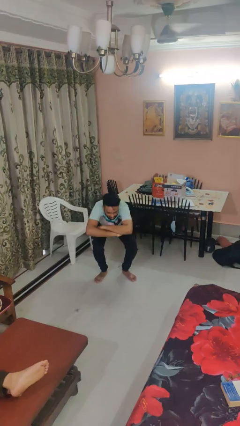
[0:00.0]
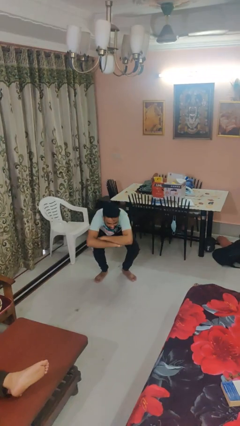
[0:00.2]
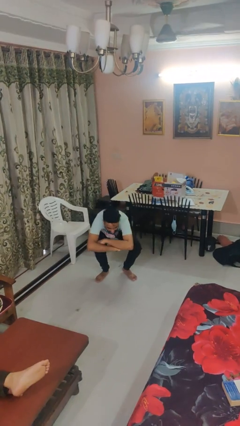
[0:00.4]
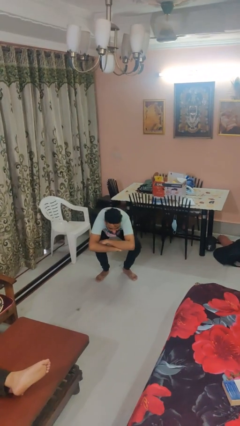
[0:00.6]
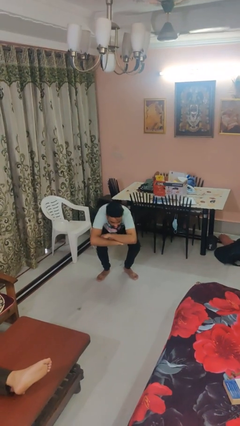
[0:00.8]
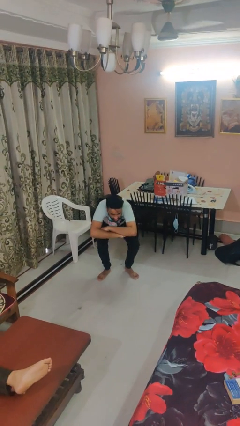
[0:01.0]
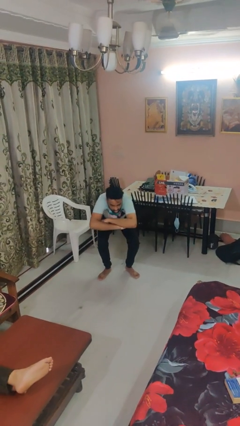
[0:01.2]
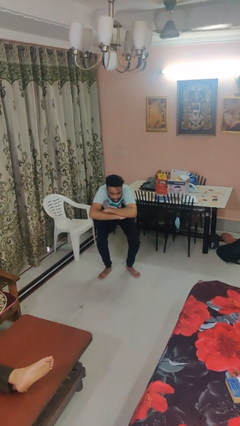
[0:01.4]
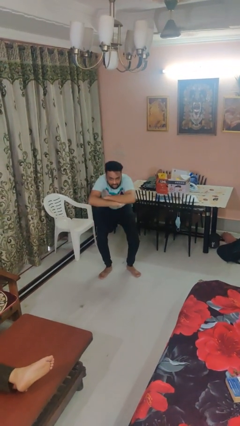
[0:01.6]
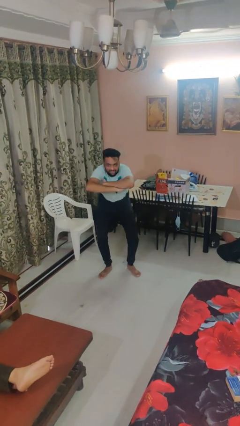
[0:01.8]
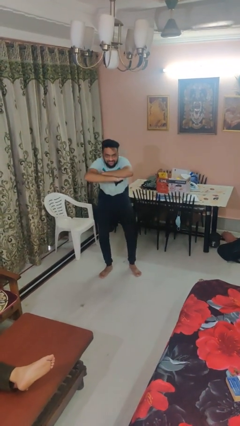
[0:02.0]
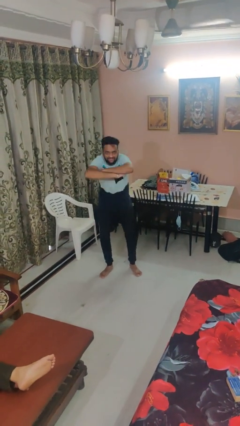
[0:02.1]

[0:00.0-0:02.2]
person squats

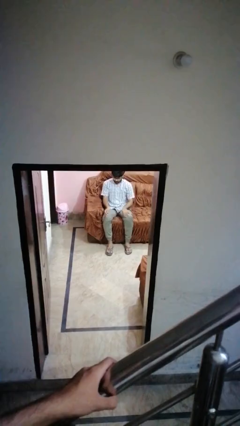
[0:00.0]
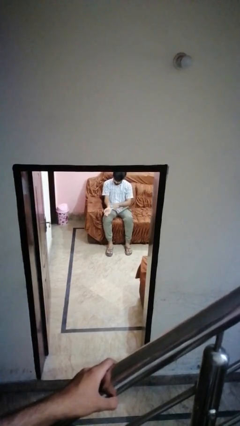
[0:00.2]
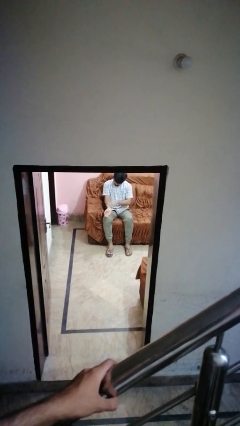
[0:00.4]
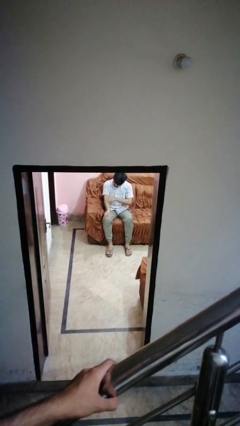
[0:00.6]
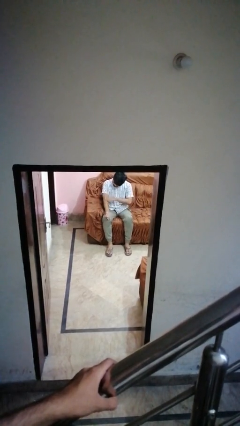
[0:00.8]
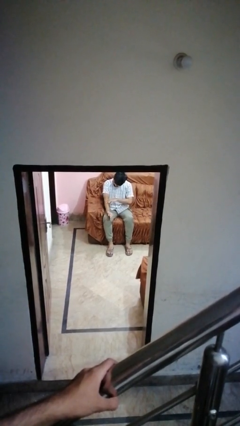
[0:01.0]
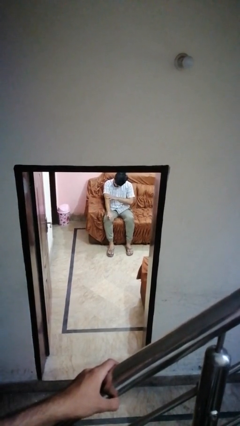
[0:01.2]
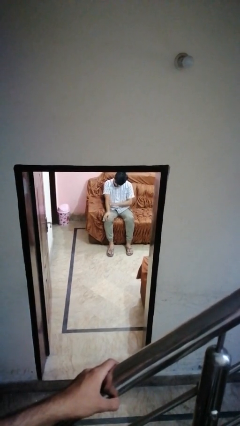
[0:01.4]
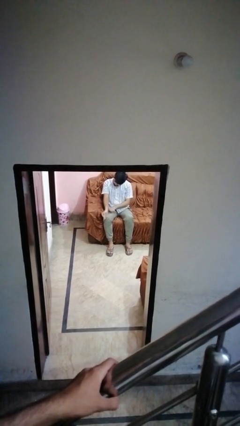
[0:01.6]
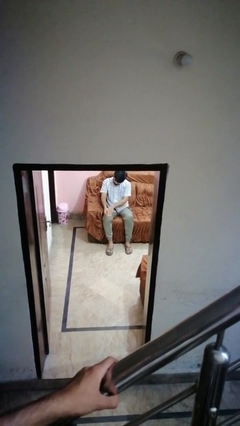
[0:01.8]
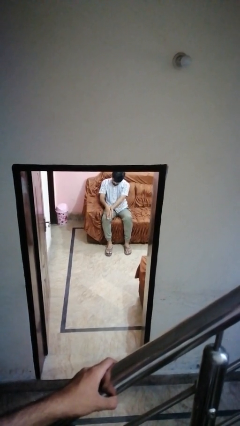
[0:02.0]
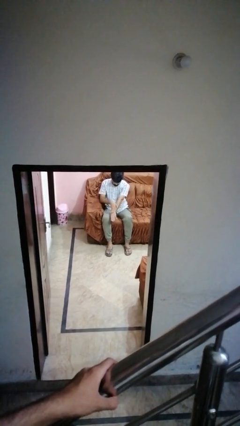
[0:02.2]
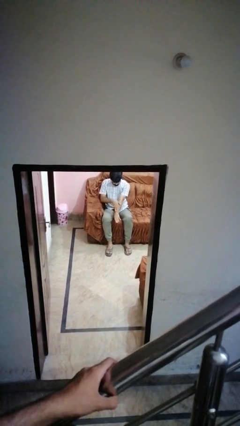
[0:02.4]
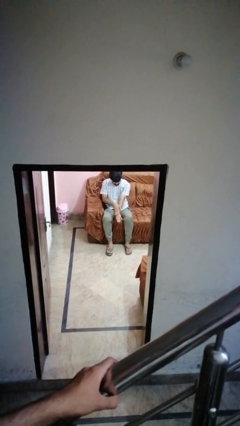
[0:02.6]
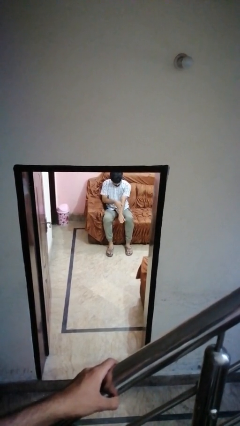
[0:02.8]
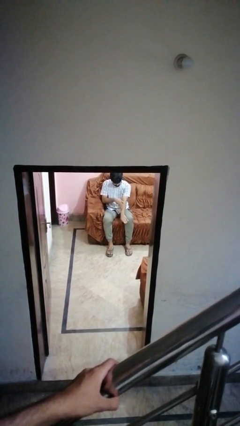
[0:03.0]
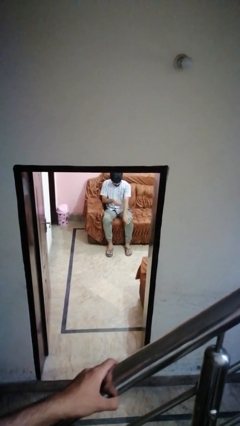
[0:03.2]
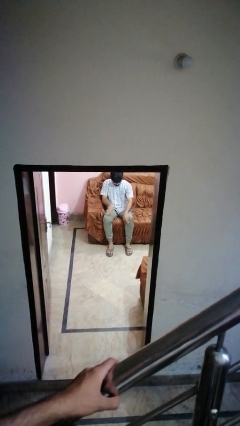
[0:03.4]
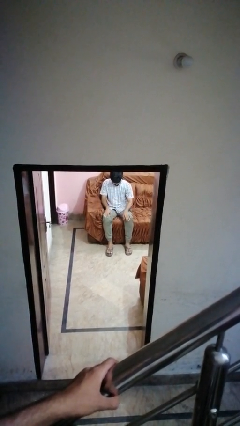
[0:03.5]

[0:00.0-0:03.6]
person looks at hands in lap

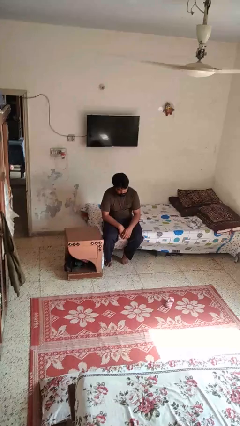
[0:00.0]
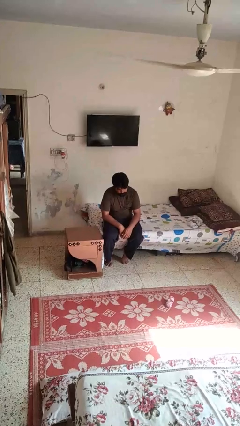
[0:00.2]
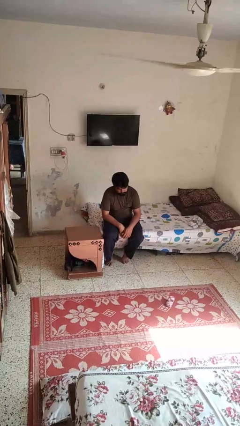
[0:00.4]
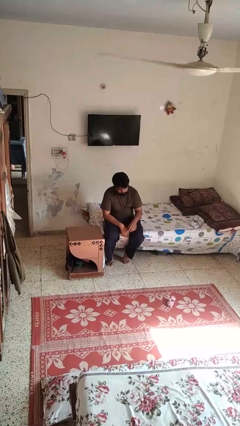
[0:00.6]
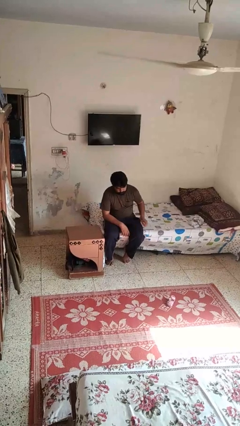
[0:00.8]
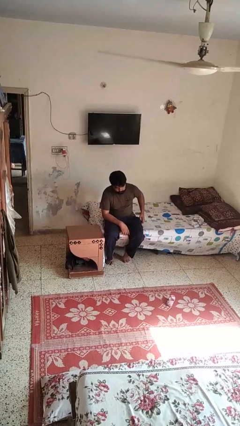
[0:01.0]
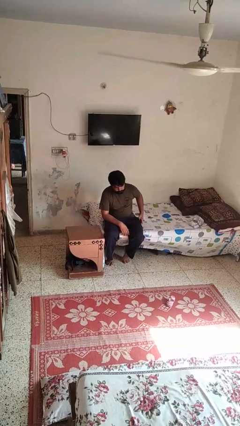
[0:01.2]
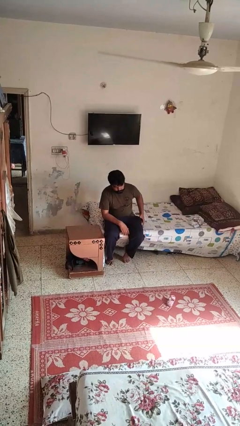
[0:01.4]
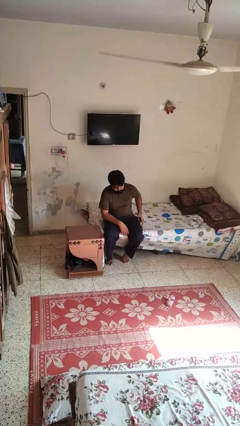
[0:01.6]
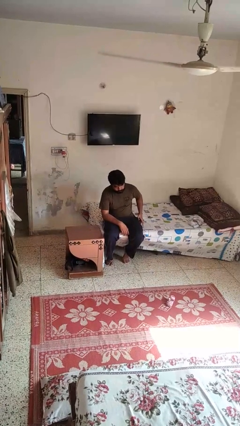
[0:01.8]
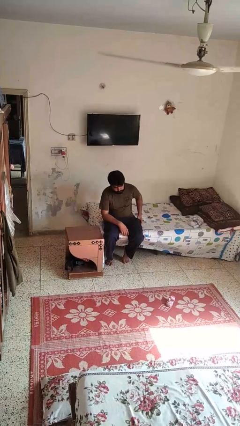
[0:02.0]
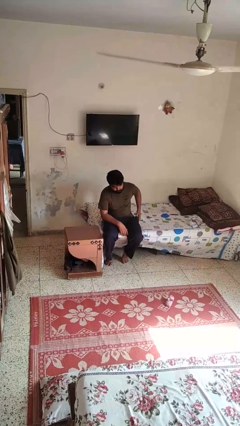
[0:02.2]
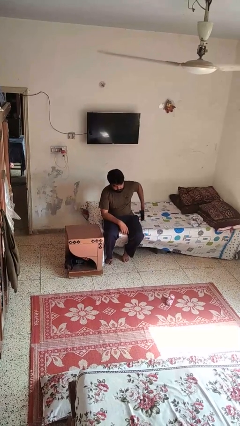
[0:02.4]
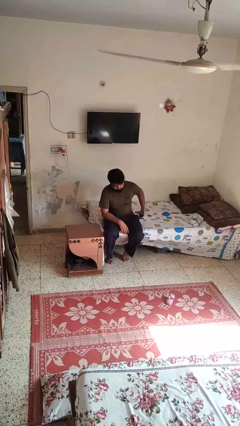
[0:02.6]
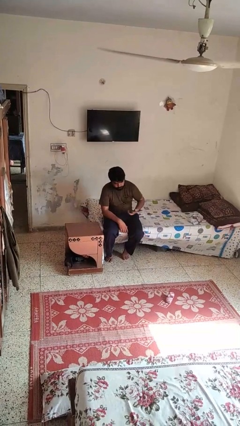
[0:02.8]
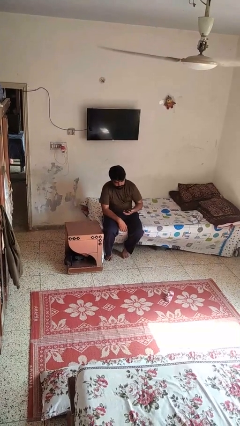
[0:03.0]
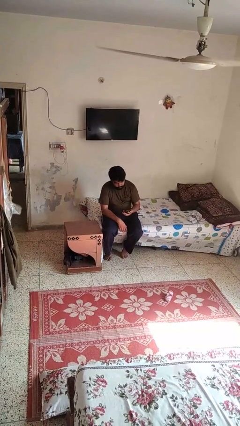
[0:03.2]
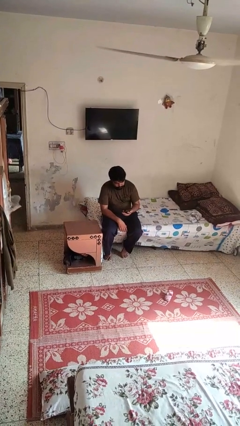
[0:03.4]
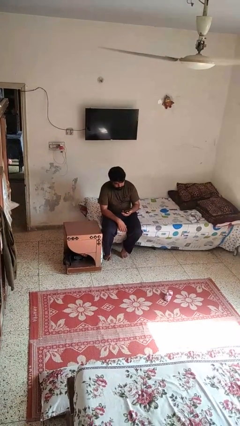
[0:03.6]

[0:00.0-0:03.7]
person takes phone from pocket

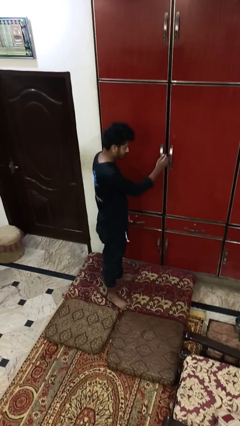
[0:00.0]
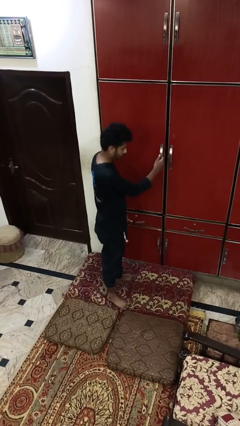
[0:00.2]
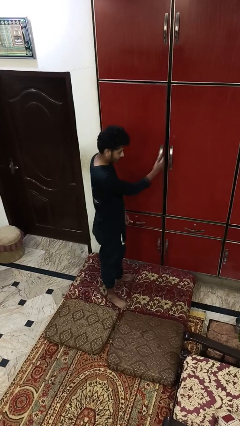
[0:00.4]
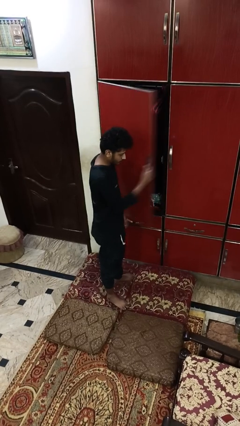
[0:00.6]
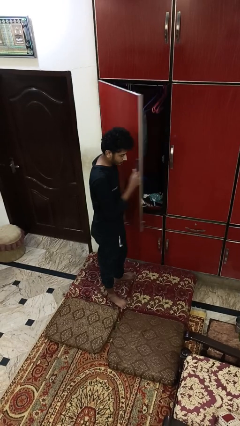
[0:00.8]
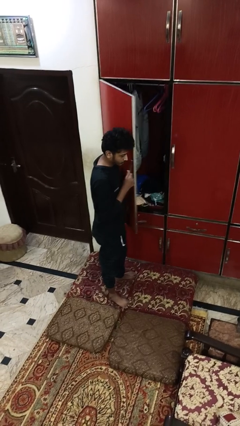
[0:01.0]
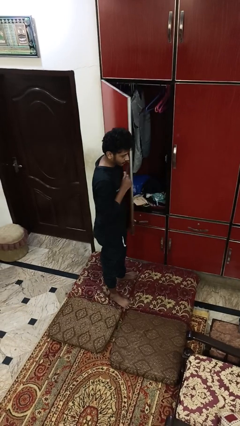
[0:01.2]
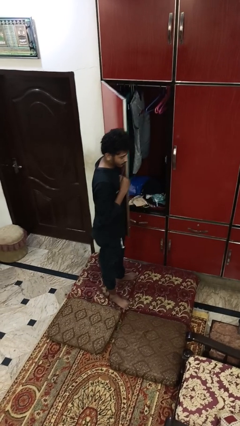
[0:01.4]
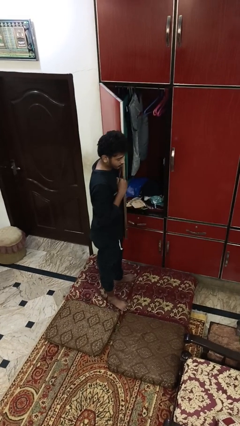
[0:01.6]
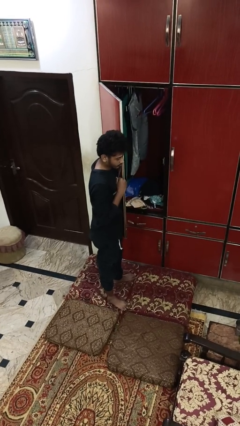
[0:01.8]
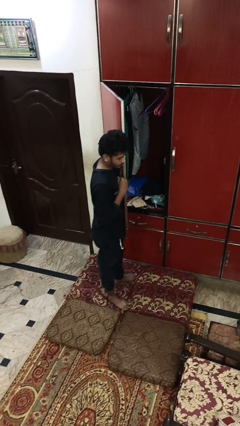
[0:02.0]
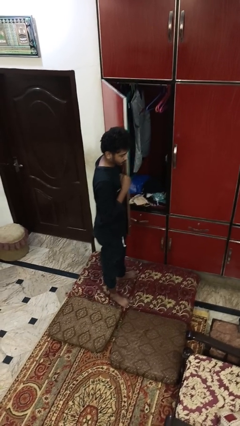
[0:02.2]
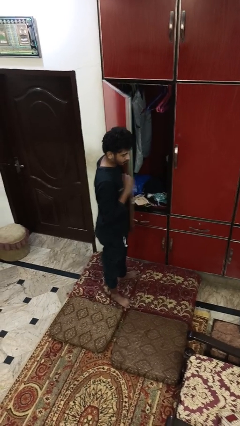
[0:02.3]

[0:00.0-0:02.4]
person opens closet door

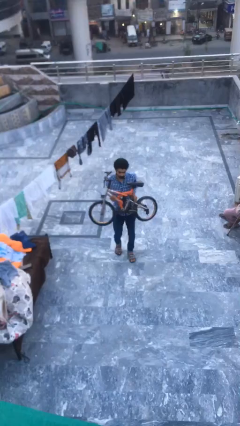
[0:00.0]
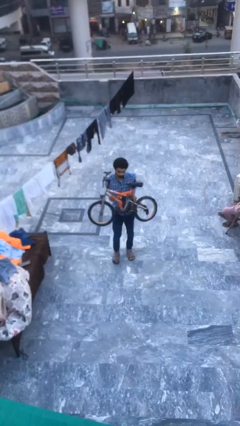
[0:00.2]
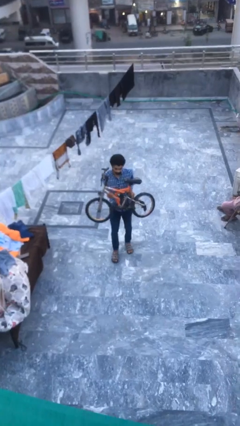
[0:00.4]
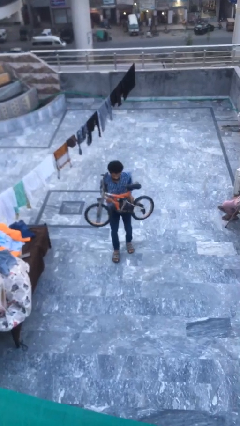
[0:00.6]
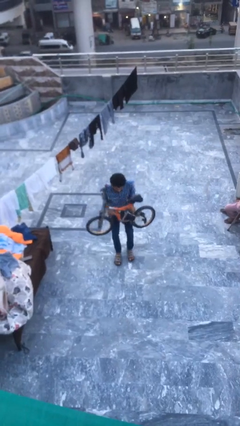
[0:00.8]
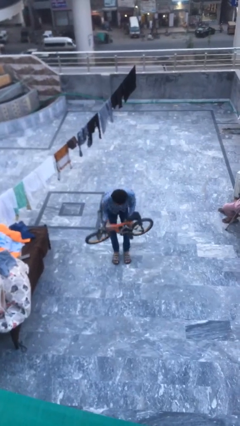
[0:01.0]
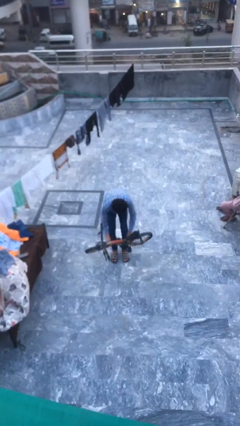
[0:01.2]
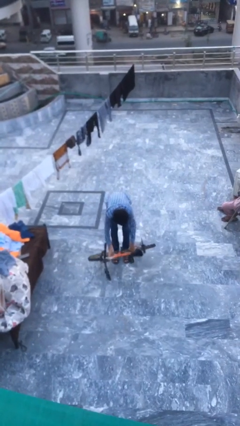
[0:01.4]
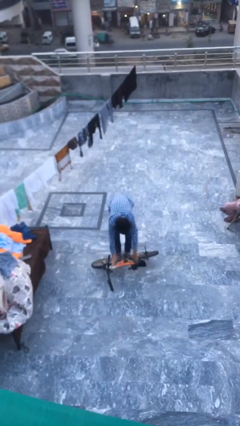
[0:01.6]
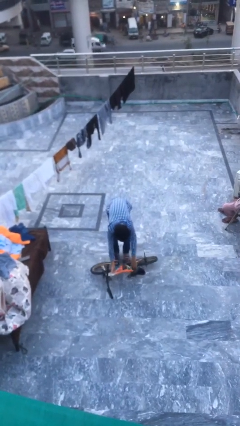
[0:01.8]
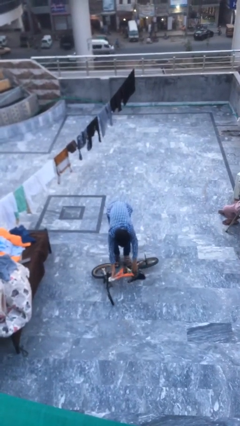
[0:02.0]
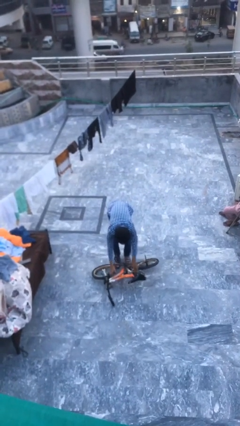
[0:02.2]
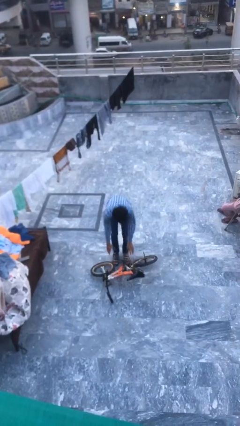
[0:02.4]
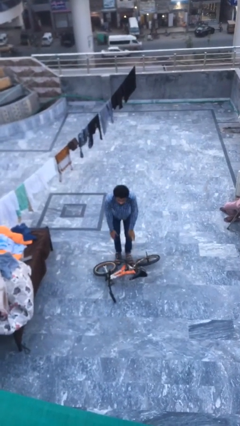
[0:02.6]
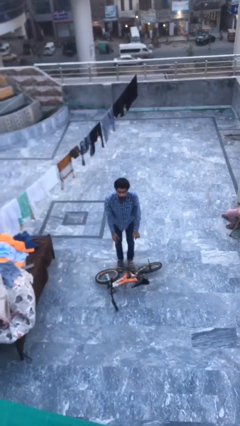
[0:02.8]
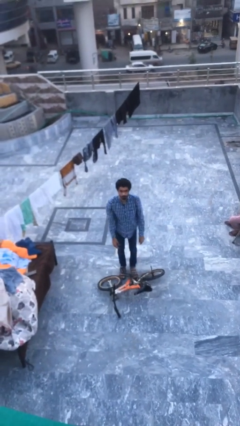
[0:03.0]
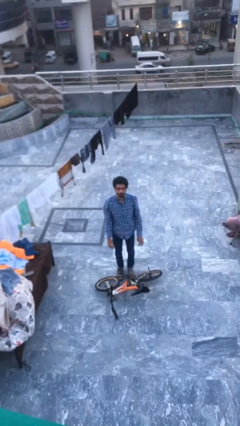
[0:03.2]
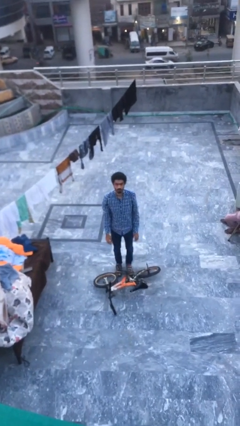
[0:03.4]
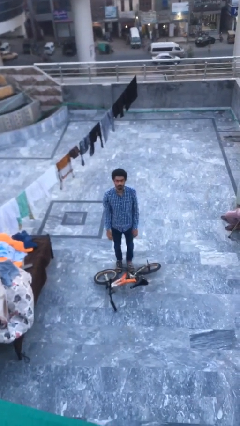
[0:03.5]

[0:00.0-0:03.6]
person puts down object on floor

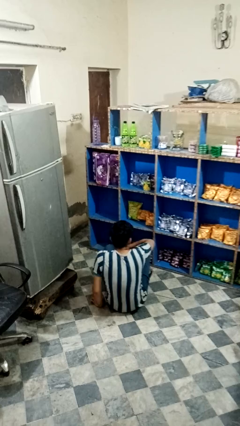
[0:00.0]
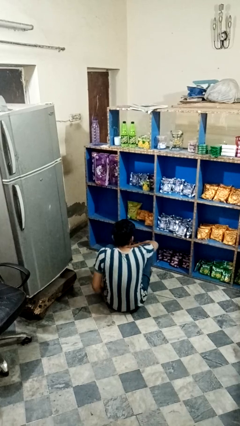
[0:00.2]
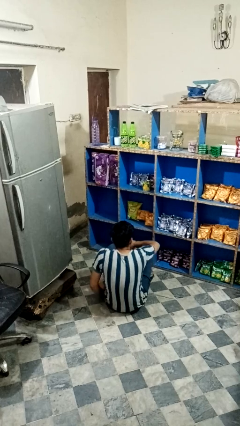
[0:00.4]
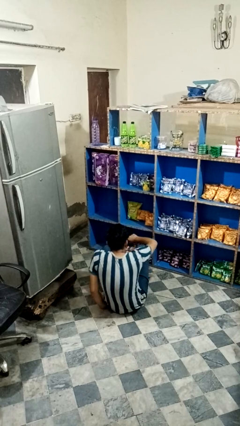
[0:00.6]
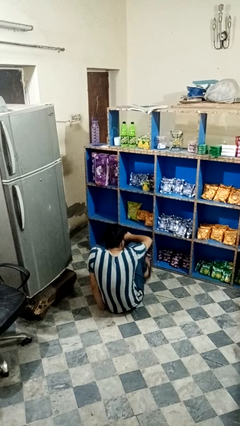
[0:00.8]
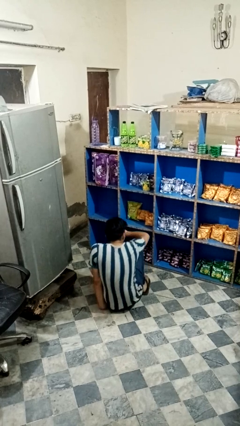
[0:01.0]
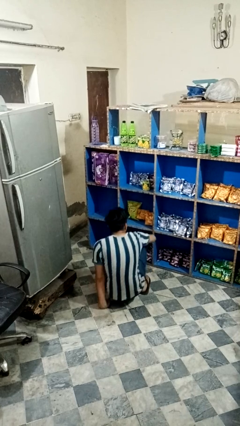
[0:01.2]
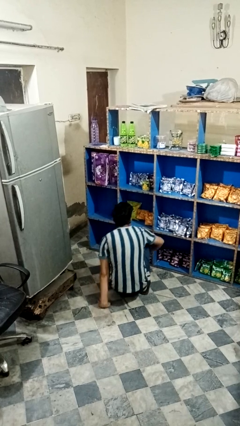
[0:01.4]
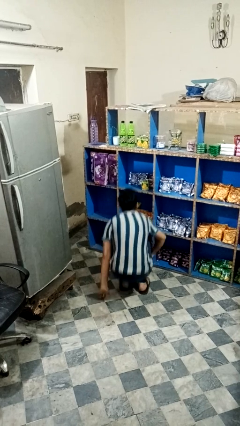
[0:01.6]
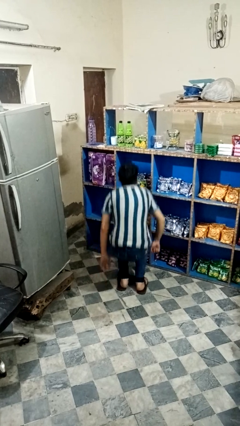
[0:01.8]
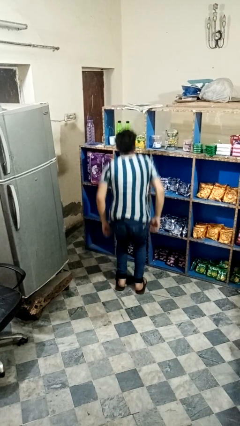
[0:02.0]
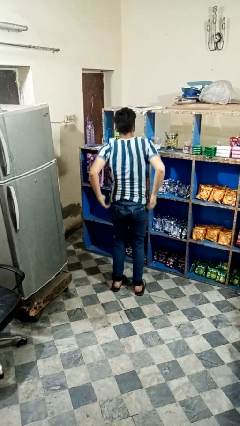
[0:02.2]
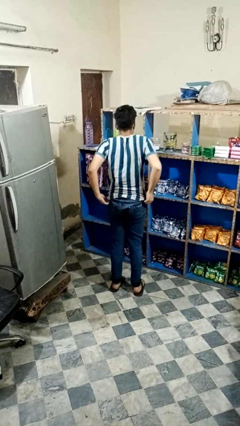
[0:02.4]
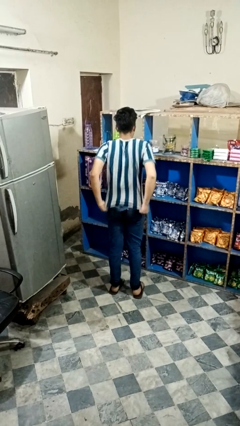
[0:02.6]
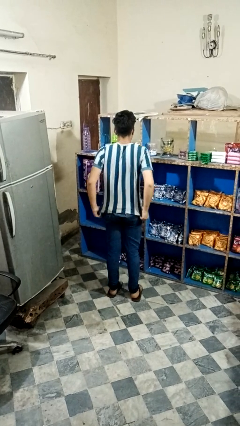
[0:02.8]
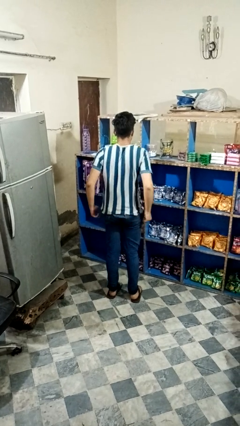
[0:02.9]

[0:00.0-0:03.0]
person stands up from floor
